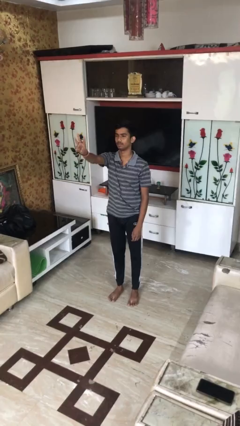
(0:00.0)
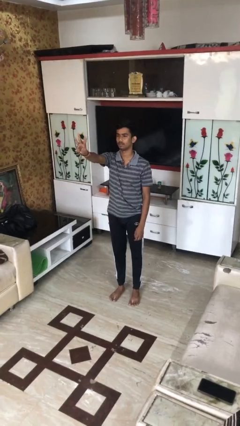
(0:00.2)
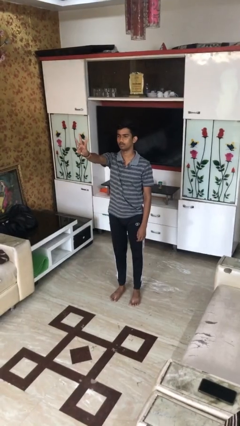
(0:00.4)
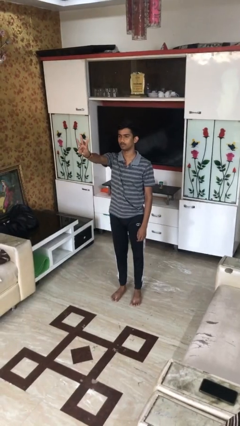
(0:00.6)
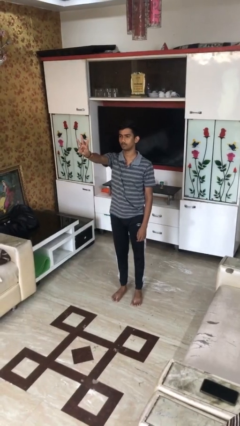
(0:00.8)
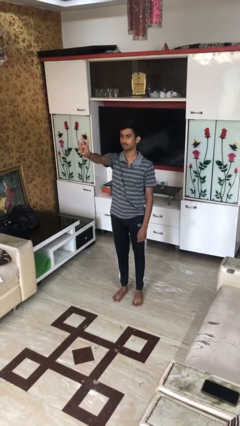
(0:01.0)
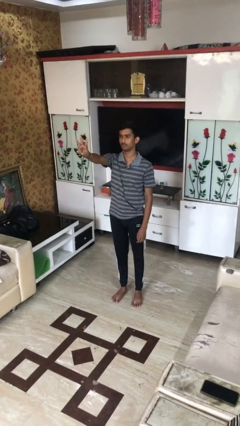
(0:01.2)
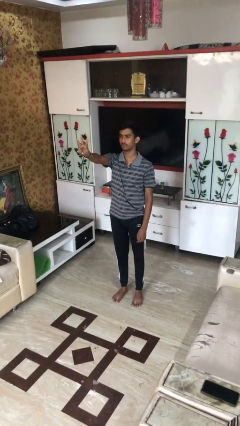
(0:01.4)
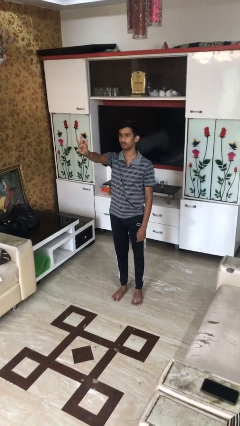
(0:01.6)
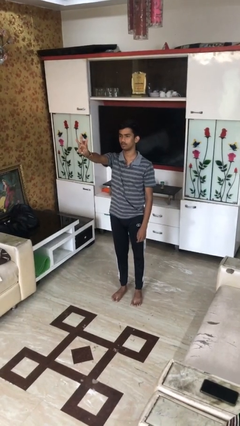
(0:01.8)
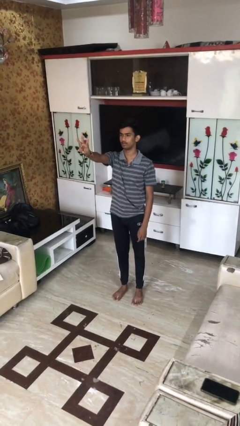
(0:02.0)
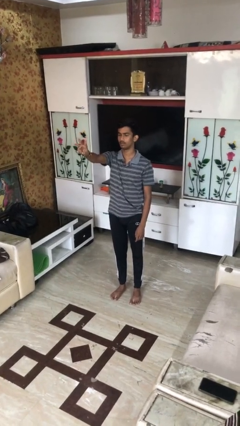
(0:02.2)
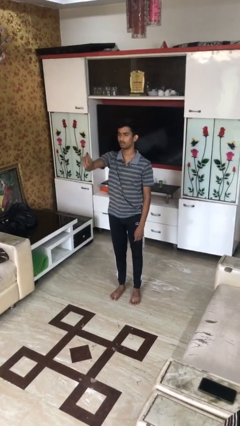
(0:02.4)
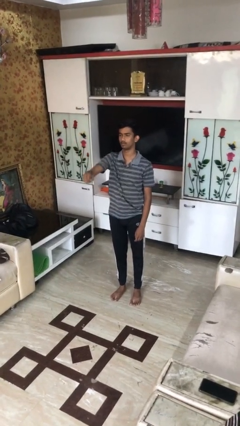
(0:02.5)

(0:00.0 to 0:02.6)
person gestures number three

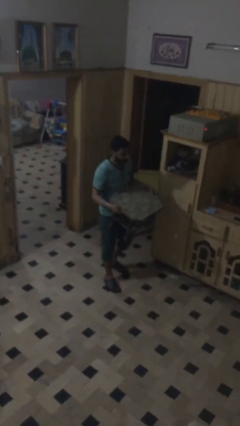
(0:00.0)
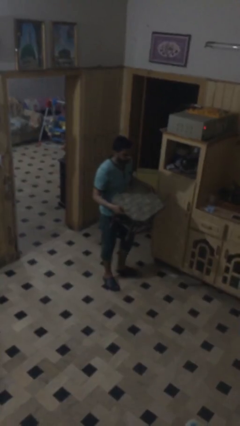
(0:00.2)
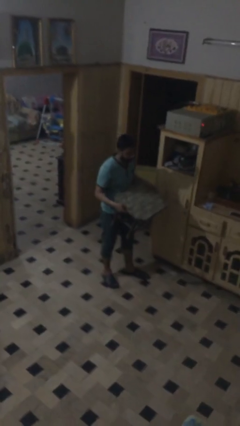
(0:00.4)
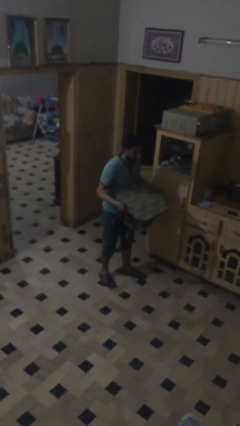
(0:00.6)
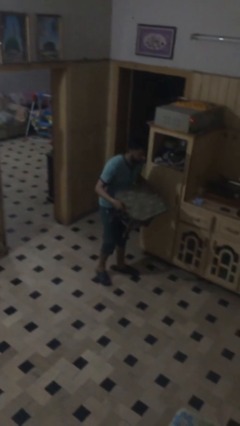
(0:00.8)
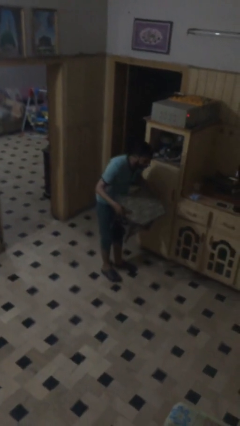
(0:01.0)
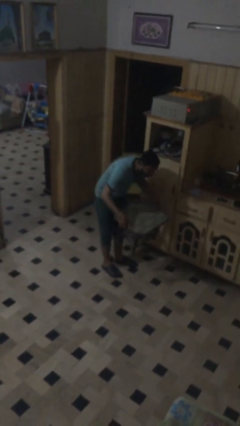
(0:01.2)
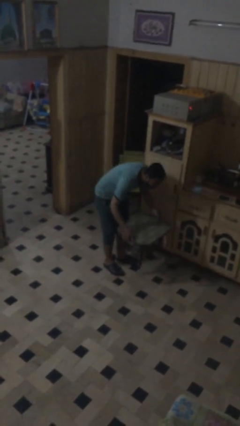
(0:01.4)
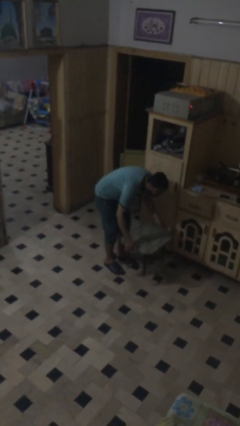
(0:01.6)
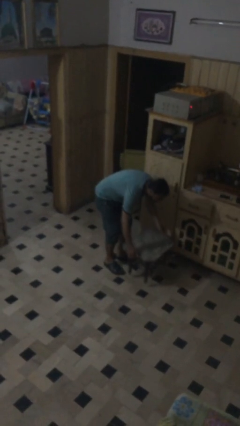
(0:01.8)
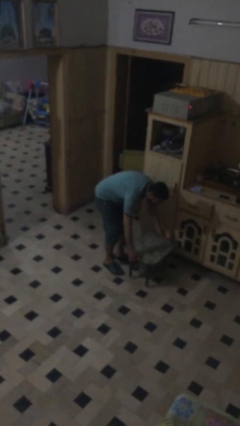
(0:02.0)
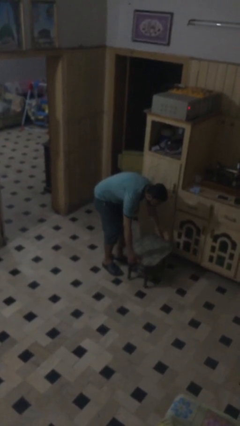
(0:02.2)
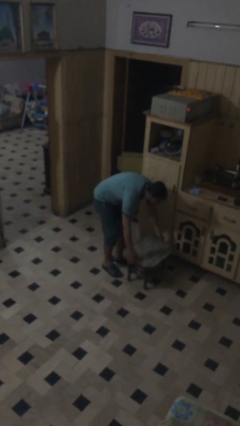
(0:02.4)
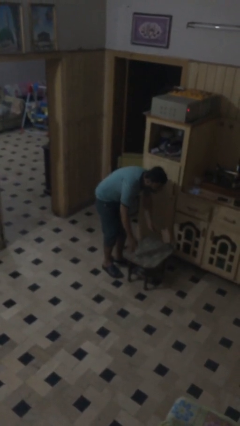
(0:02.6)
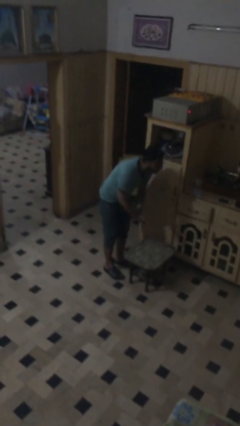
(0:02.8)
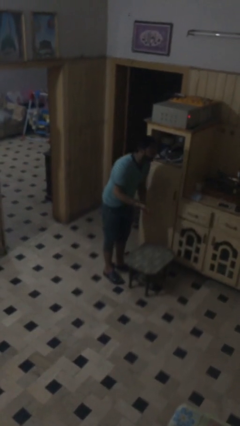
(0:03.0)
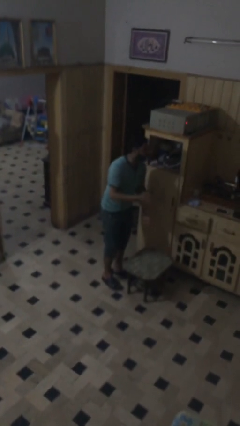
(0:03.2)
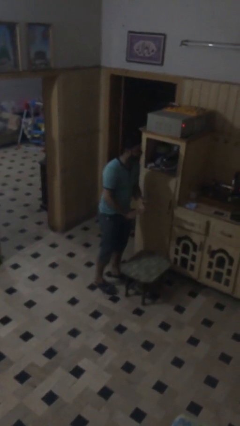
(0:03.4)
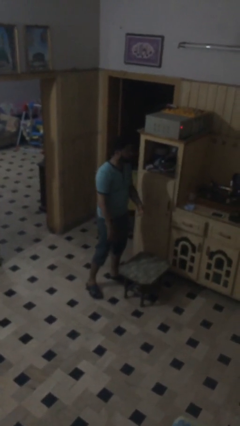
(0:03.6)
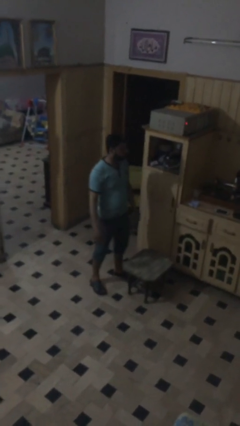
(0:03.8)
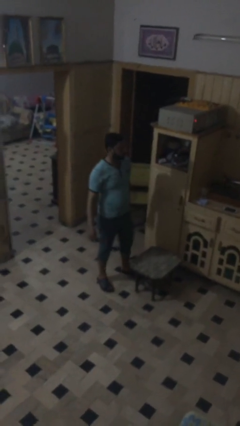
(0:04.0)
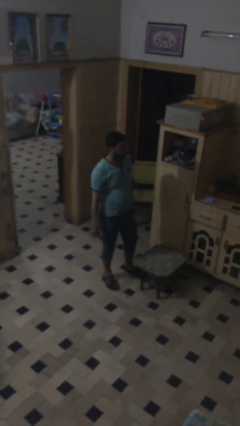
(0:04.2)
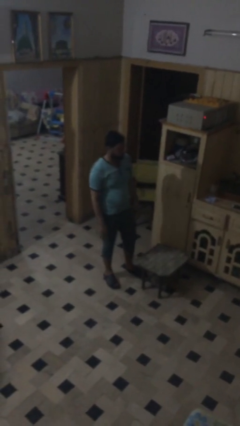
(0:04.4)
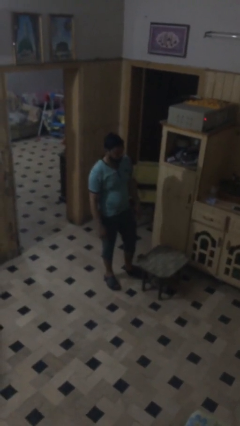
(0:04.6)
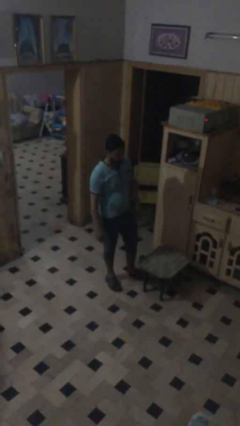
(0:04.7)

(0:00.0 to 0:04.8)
person puts down object on floor

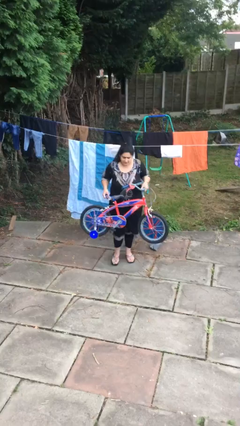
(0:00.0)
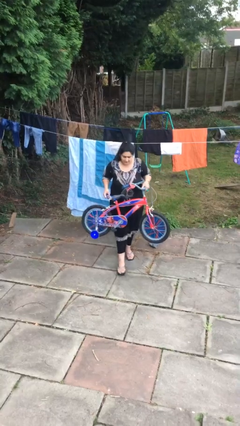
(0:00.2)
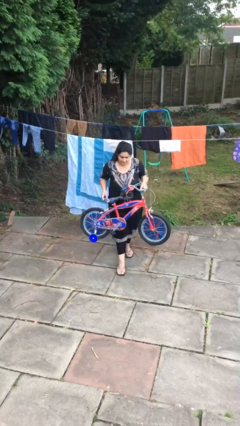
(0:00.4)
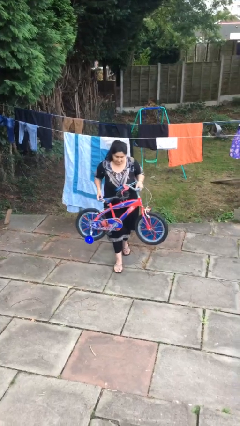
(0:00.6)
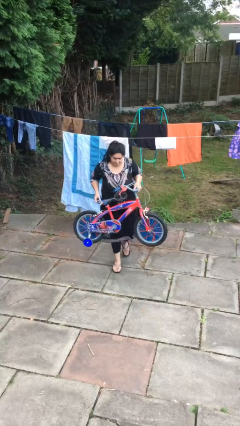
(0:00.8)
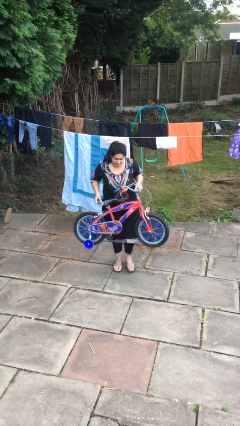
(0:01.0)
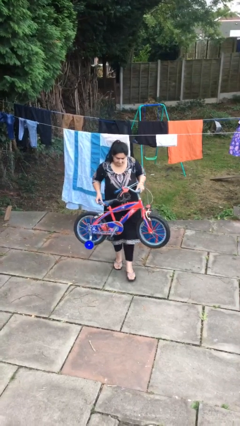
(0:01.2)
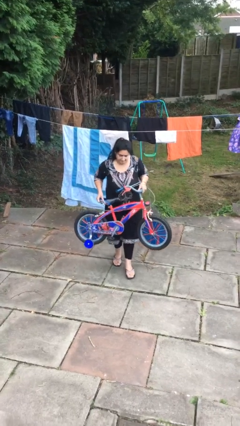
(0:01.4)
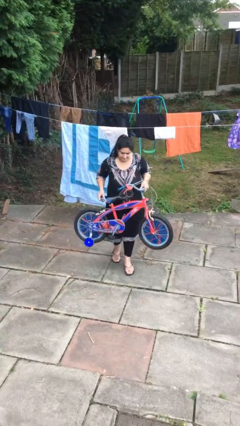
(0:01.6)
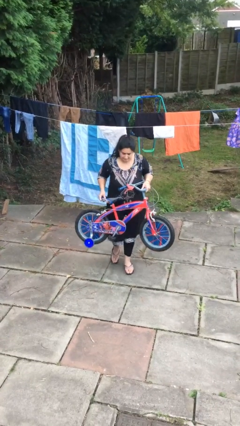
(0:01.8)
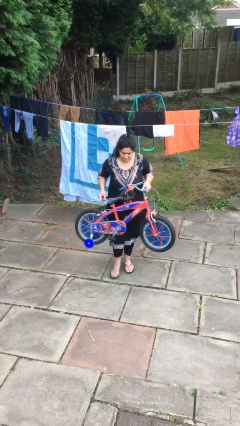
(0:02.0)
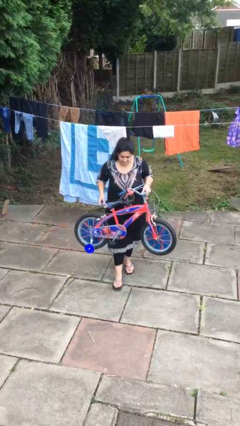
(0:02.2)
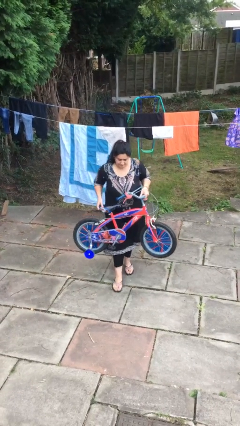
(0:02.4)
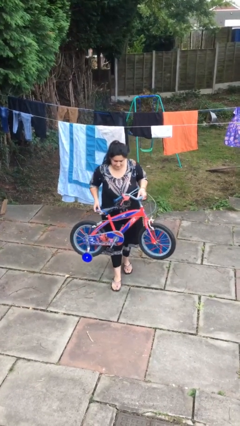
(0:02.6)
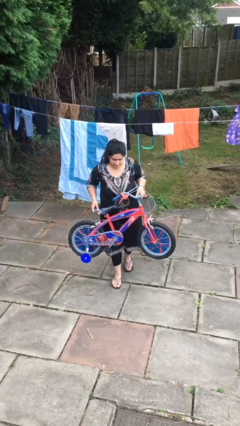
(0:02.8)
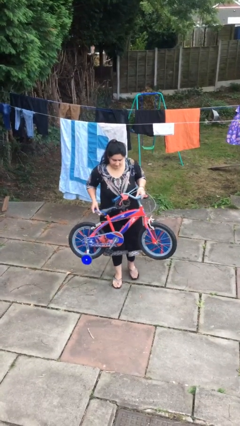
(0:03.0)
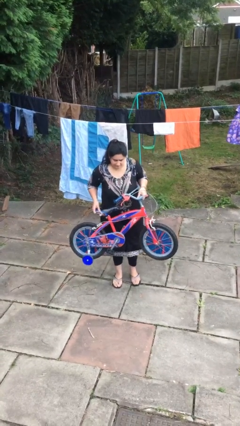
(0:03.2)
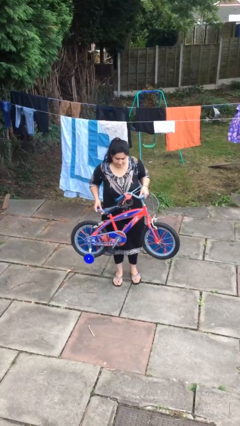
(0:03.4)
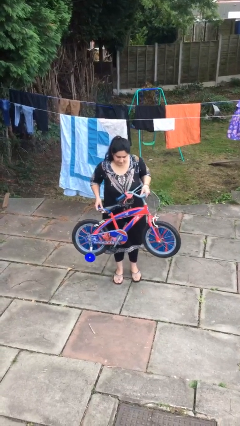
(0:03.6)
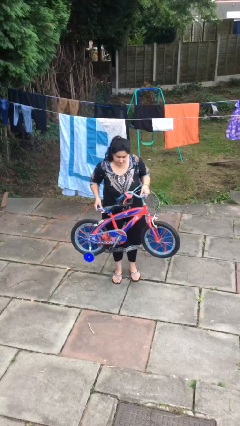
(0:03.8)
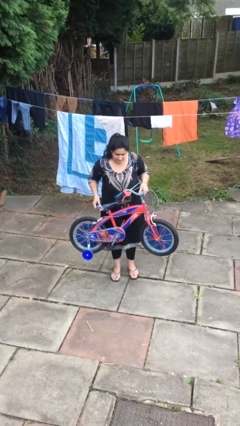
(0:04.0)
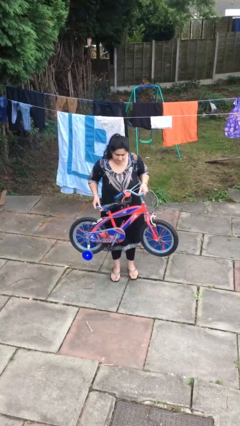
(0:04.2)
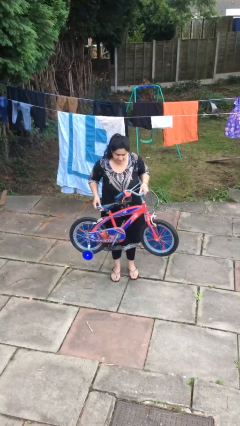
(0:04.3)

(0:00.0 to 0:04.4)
person carries heavy object

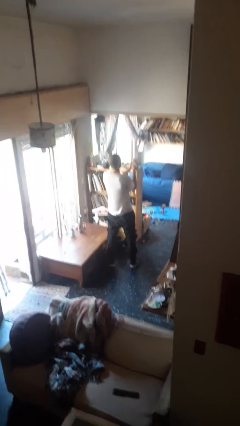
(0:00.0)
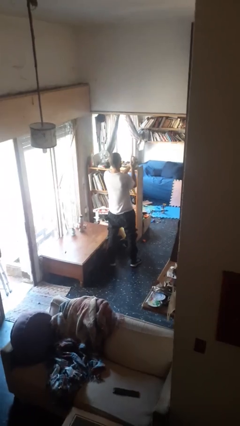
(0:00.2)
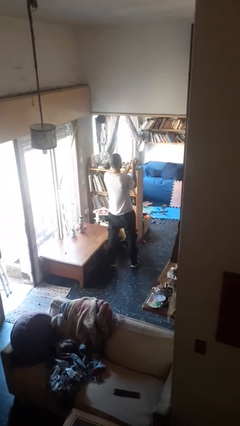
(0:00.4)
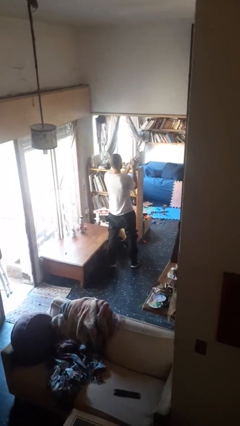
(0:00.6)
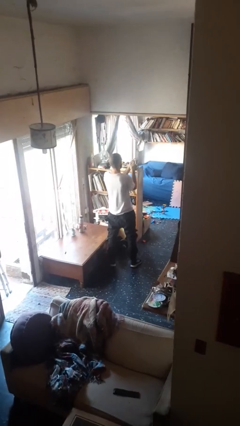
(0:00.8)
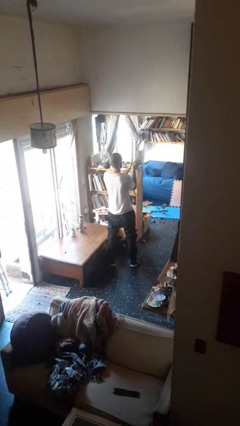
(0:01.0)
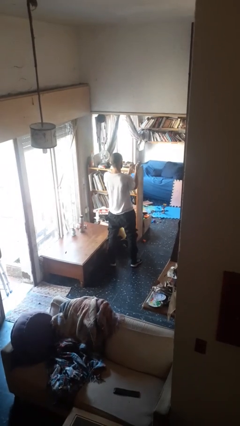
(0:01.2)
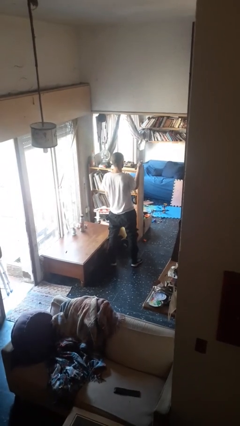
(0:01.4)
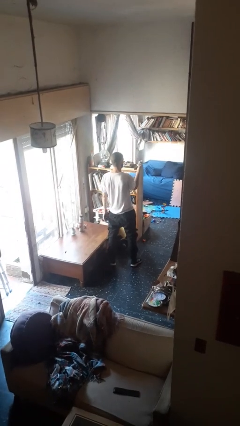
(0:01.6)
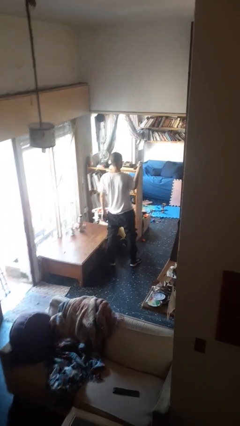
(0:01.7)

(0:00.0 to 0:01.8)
person crumples paper

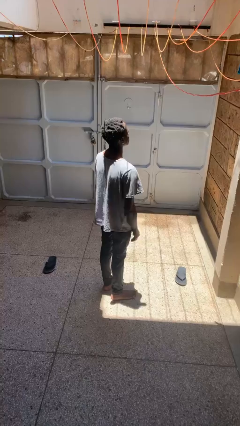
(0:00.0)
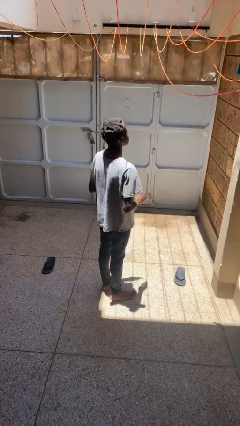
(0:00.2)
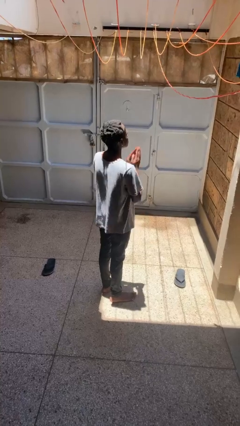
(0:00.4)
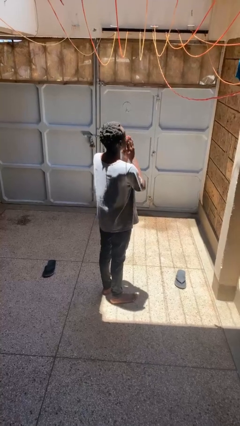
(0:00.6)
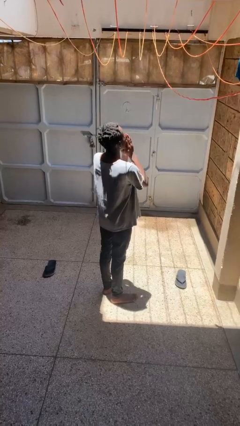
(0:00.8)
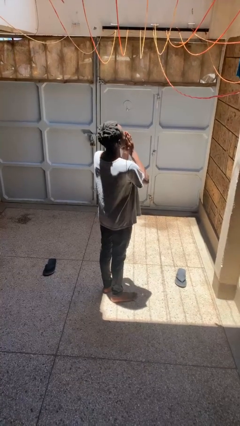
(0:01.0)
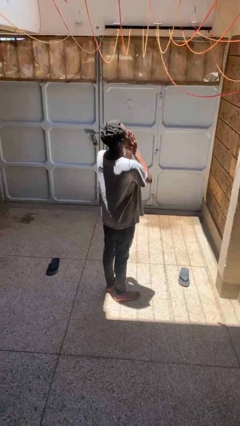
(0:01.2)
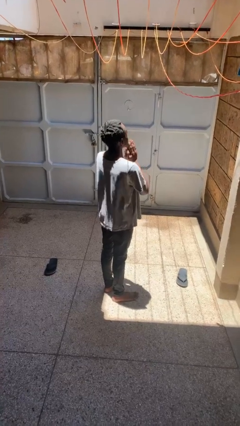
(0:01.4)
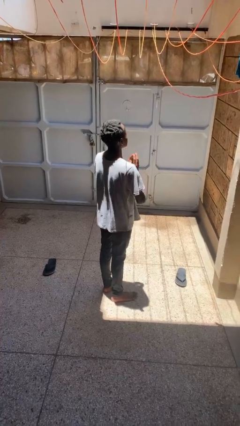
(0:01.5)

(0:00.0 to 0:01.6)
person prays

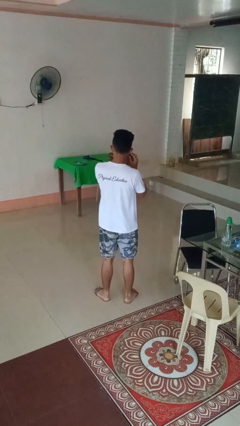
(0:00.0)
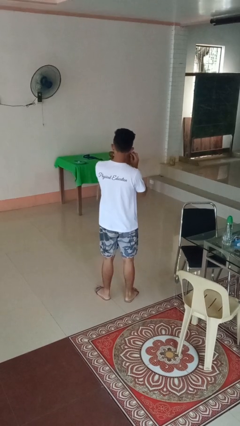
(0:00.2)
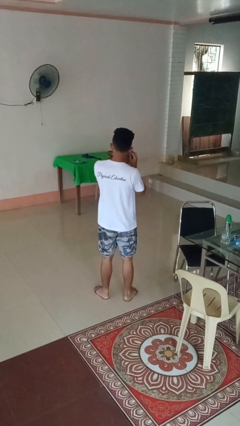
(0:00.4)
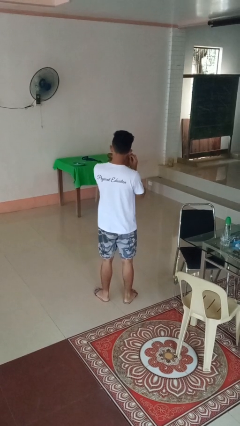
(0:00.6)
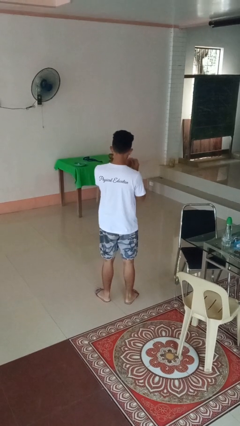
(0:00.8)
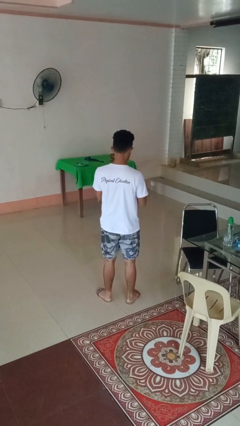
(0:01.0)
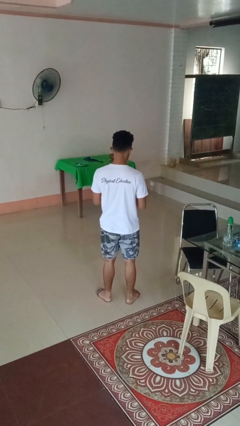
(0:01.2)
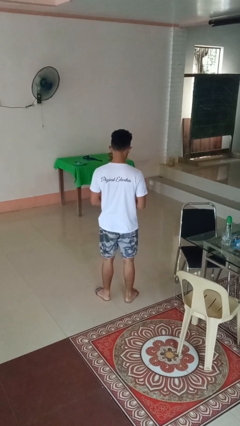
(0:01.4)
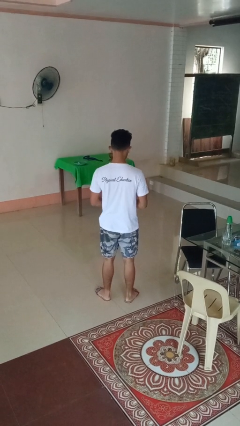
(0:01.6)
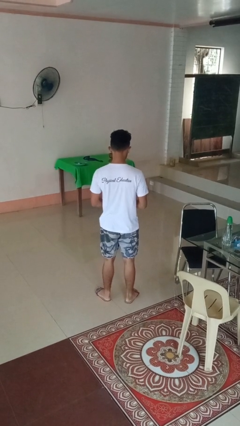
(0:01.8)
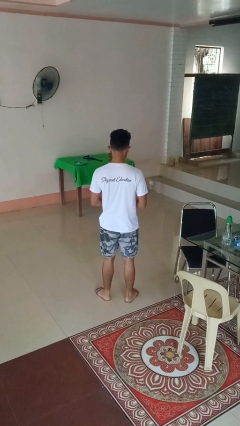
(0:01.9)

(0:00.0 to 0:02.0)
person takes off earrings

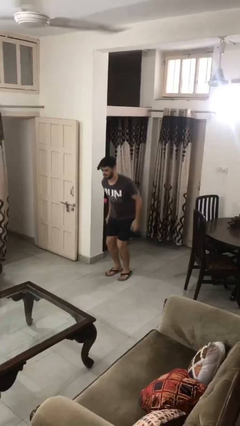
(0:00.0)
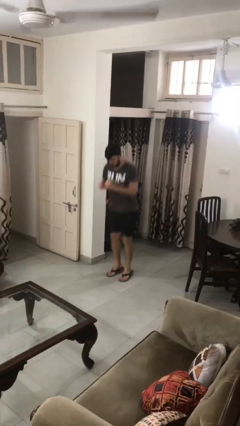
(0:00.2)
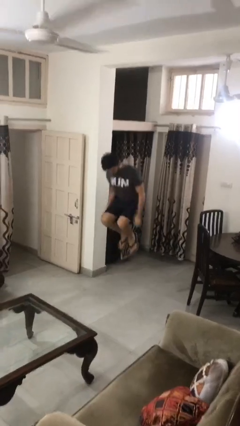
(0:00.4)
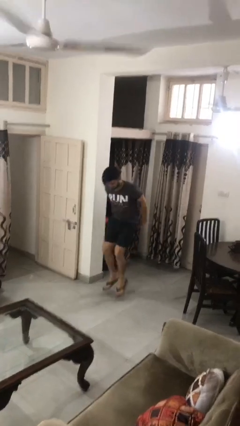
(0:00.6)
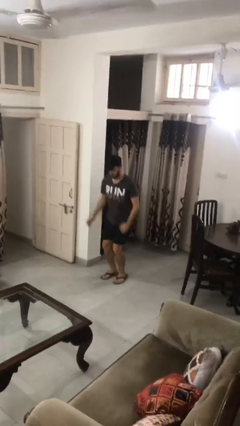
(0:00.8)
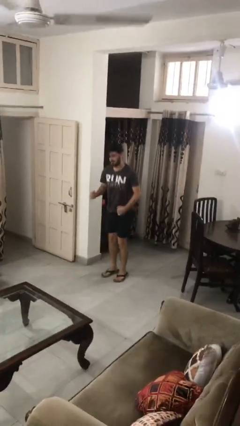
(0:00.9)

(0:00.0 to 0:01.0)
person jumps
